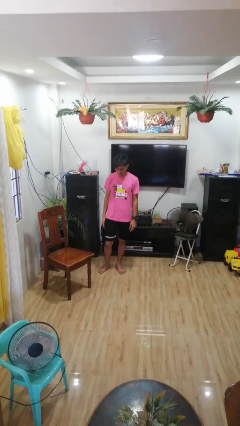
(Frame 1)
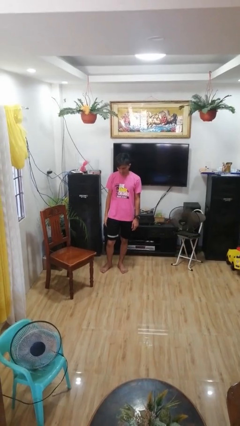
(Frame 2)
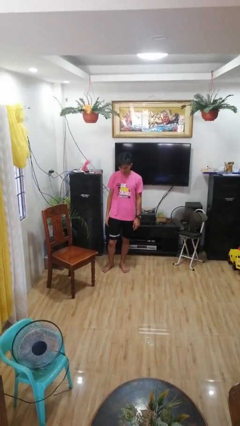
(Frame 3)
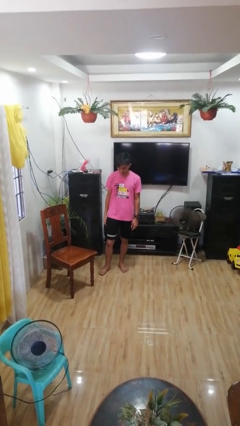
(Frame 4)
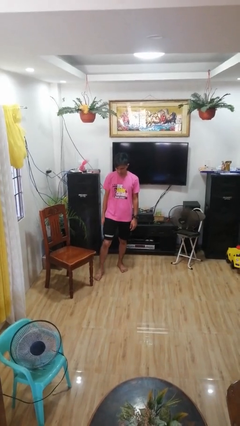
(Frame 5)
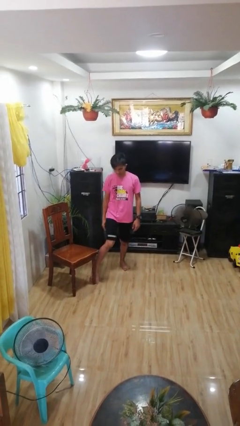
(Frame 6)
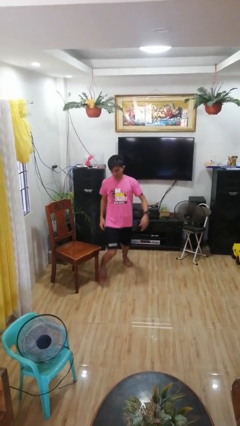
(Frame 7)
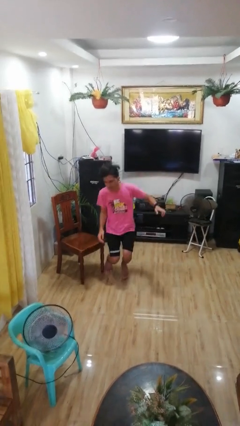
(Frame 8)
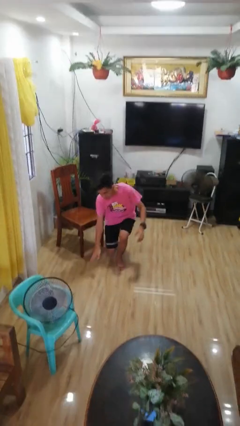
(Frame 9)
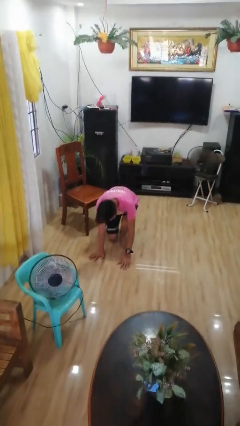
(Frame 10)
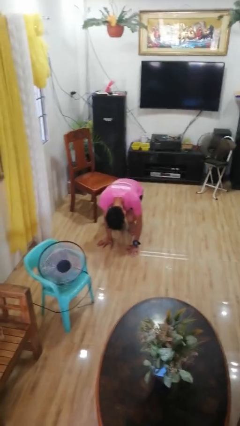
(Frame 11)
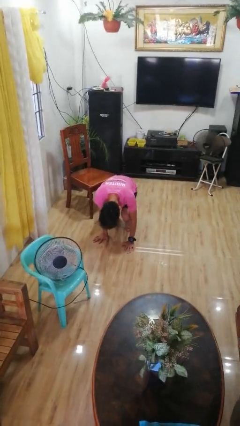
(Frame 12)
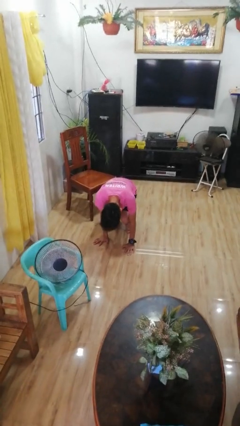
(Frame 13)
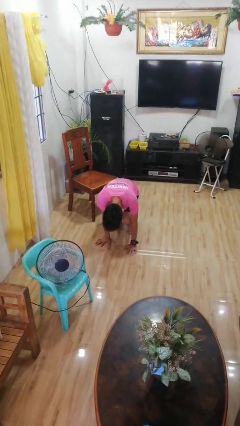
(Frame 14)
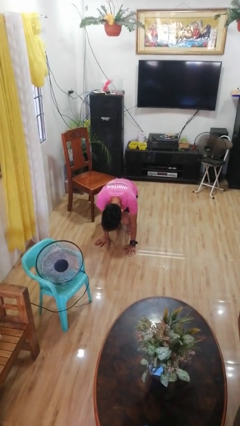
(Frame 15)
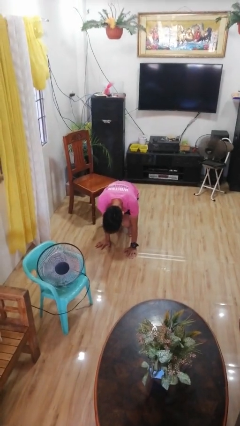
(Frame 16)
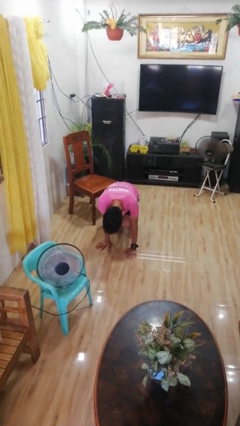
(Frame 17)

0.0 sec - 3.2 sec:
person trips on object on floor

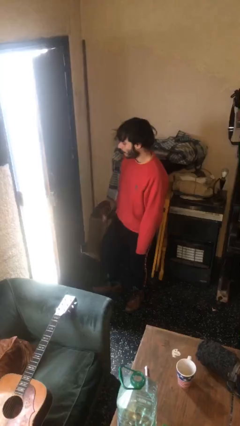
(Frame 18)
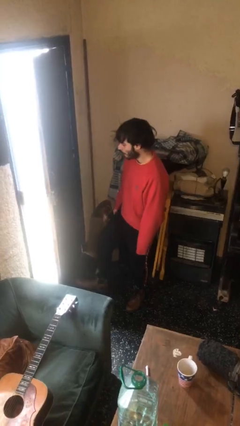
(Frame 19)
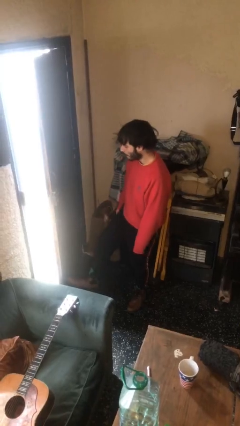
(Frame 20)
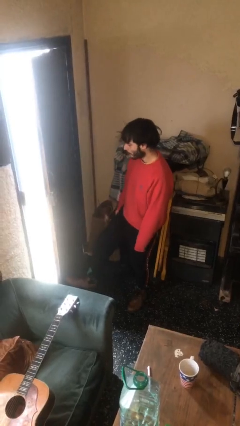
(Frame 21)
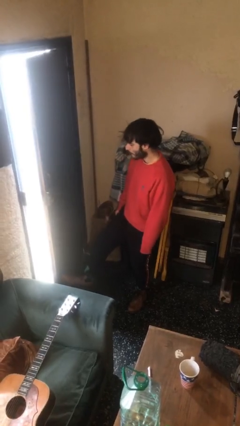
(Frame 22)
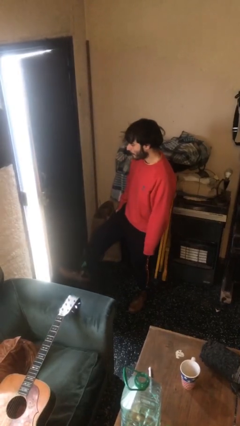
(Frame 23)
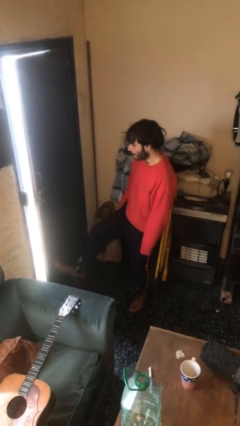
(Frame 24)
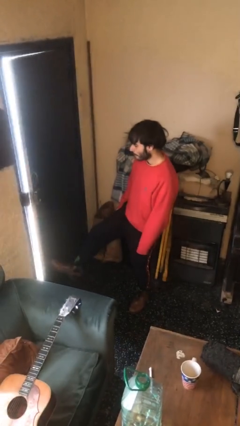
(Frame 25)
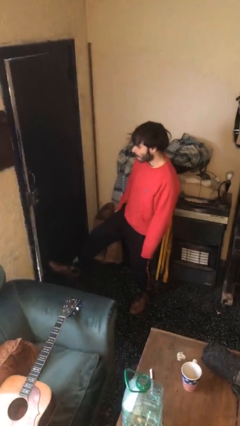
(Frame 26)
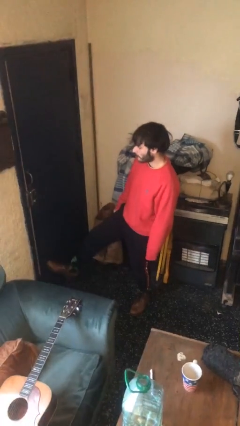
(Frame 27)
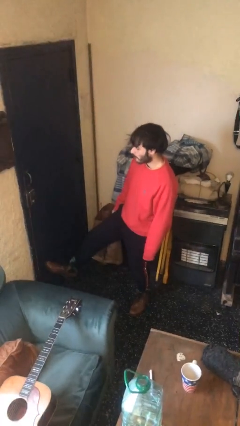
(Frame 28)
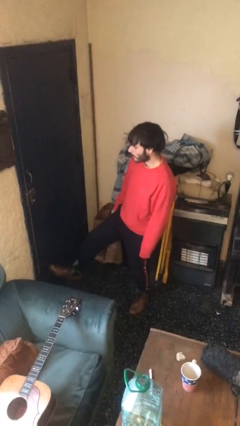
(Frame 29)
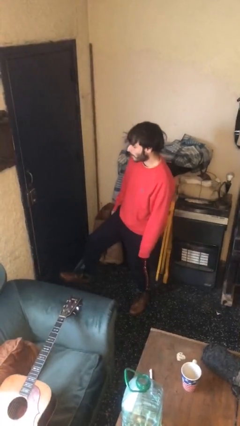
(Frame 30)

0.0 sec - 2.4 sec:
person closes door with foot

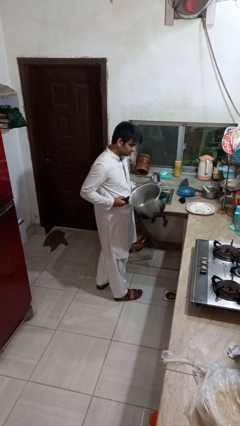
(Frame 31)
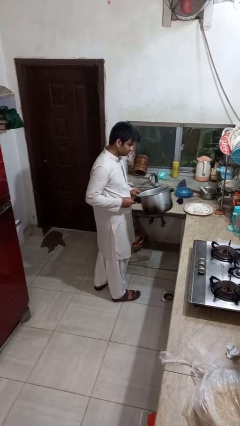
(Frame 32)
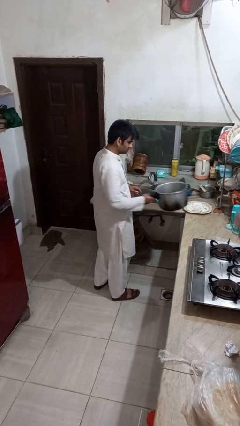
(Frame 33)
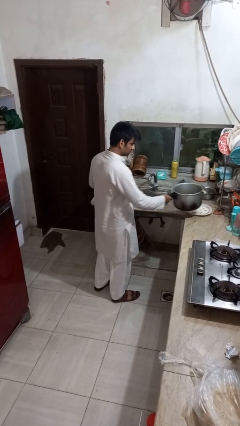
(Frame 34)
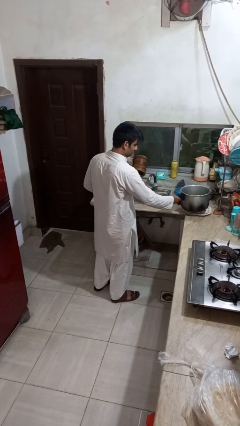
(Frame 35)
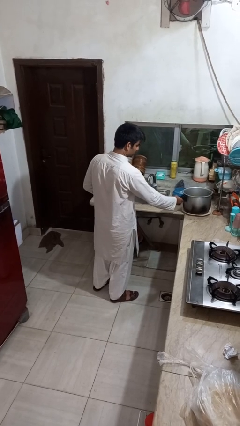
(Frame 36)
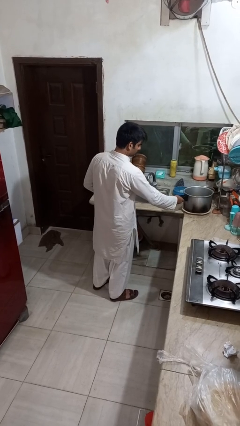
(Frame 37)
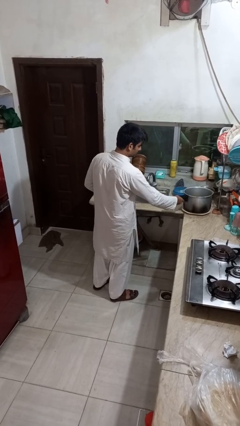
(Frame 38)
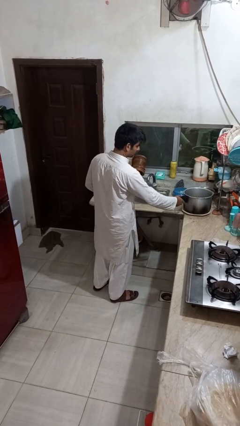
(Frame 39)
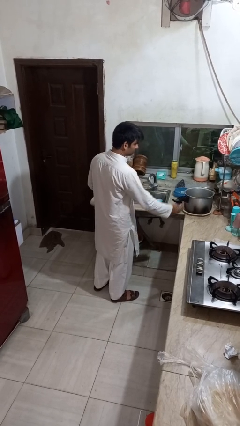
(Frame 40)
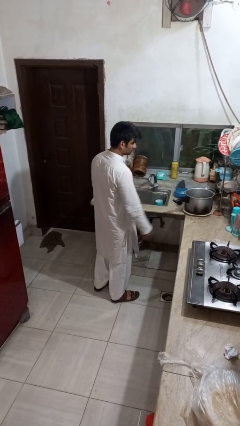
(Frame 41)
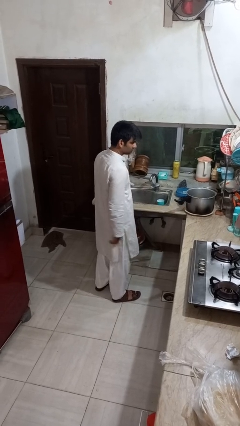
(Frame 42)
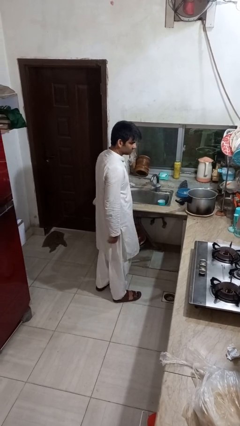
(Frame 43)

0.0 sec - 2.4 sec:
person puts down object on countertop

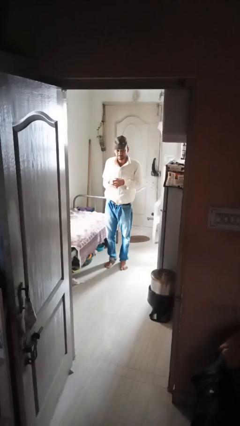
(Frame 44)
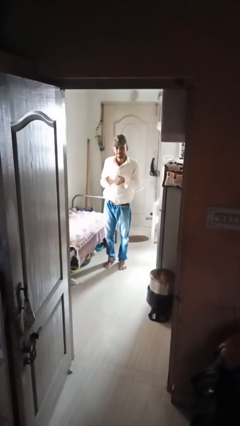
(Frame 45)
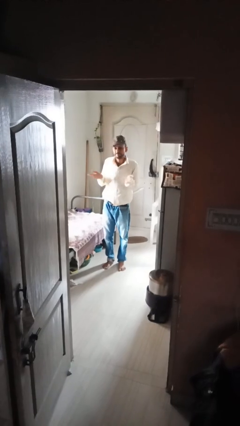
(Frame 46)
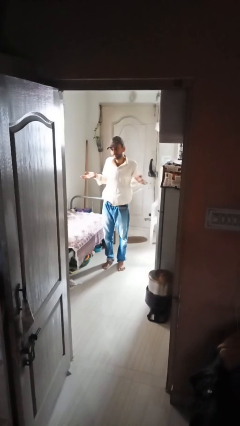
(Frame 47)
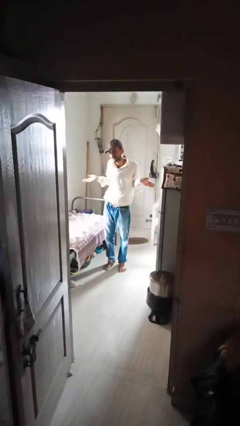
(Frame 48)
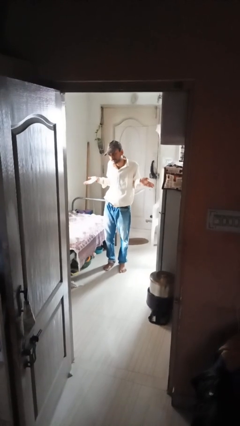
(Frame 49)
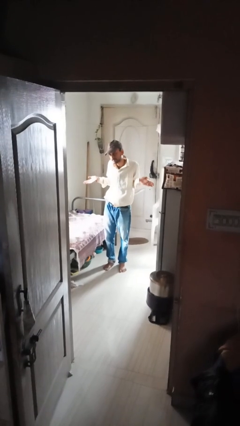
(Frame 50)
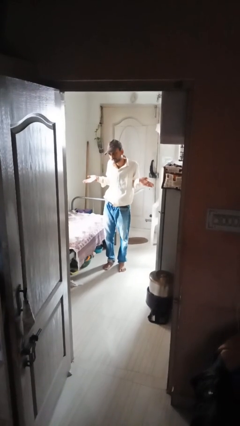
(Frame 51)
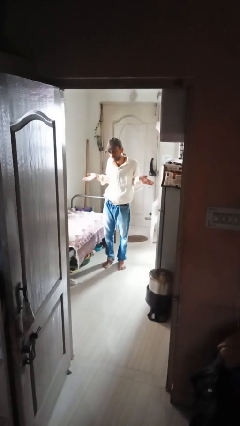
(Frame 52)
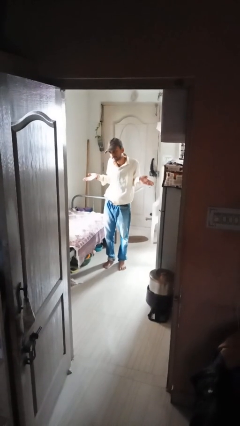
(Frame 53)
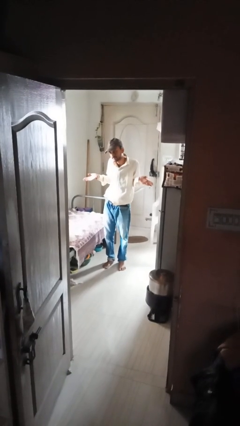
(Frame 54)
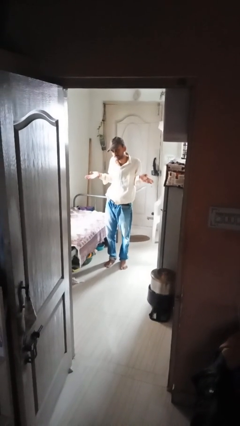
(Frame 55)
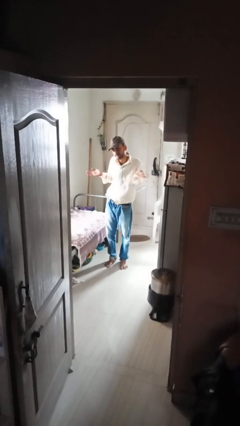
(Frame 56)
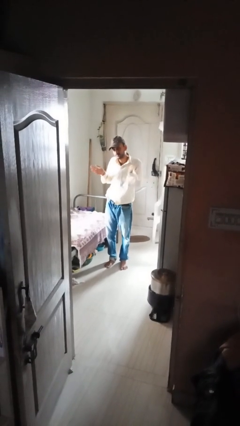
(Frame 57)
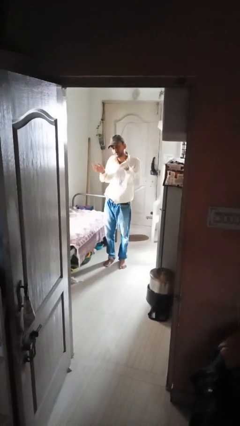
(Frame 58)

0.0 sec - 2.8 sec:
person shrugs

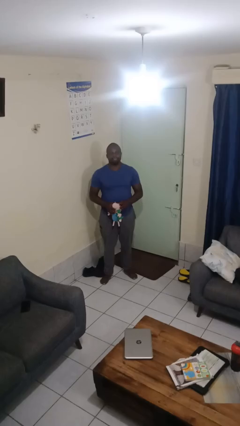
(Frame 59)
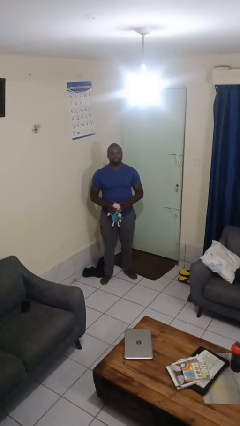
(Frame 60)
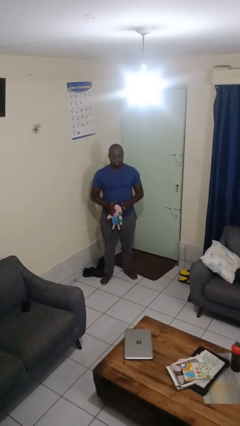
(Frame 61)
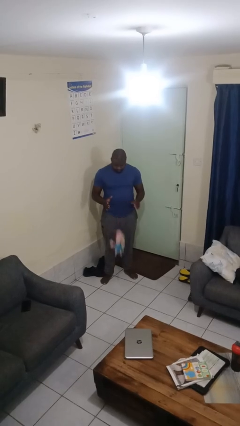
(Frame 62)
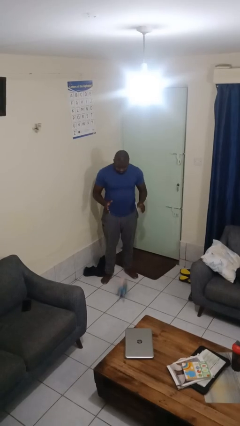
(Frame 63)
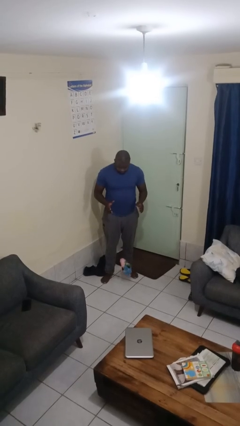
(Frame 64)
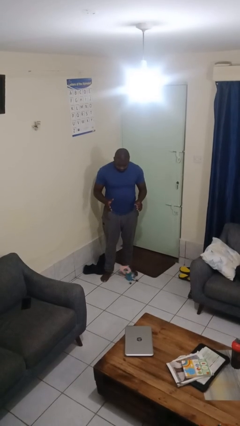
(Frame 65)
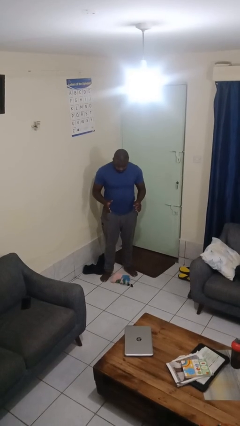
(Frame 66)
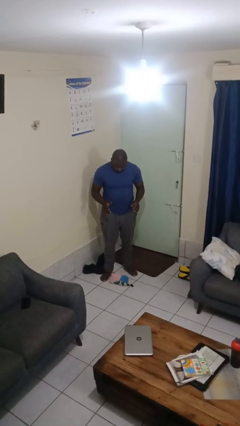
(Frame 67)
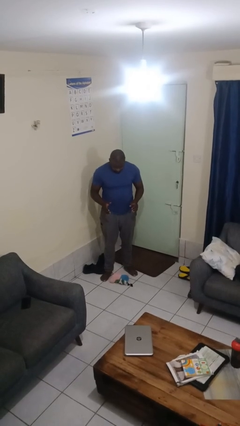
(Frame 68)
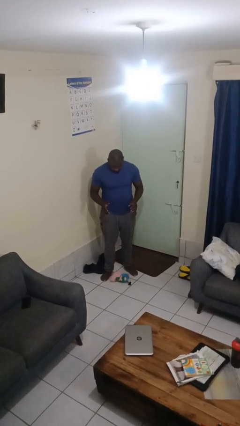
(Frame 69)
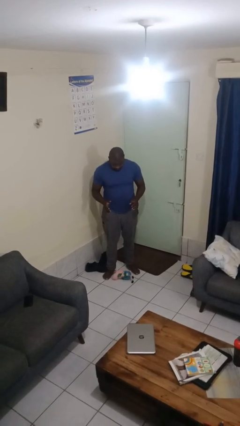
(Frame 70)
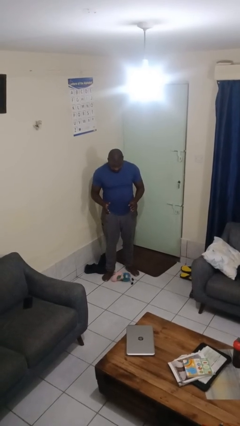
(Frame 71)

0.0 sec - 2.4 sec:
person drops object

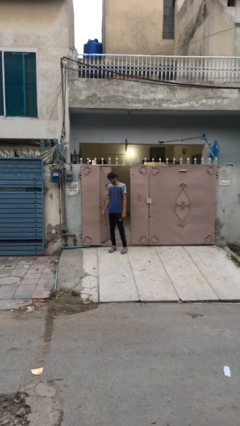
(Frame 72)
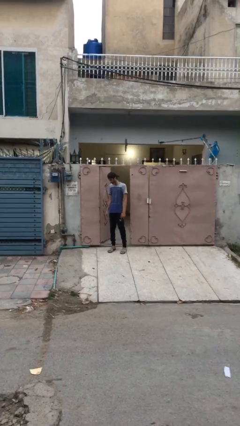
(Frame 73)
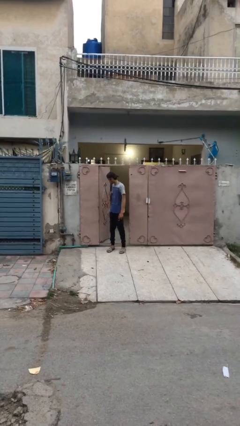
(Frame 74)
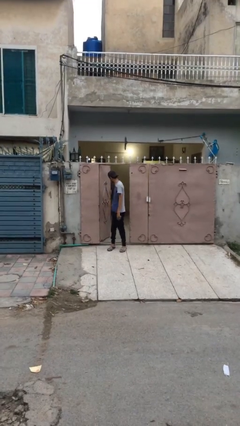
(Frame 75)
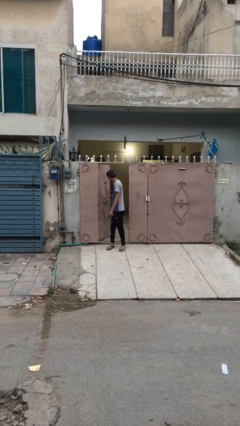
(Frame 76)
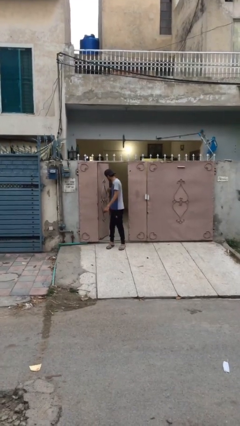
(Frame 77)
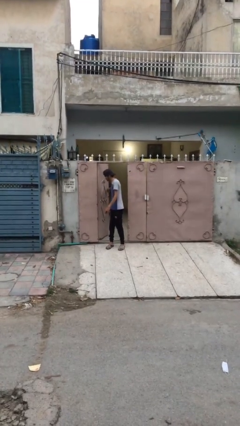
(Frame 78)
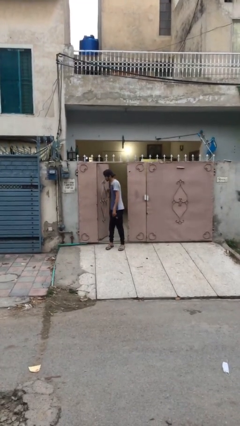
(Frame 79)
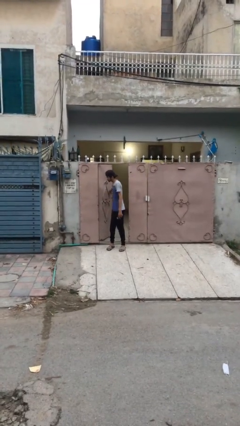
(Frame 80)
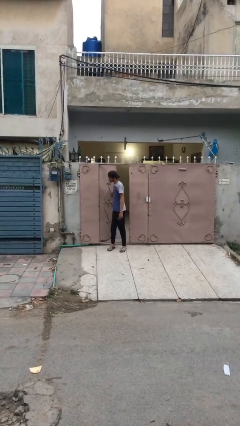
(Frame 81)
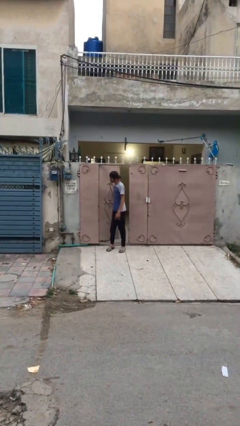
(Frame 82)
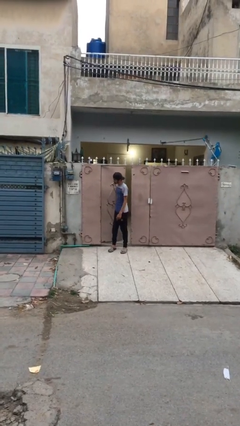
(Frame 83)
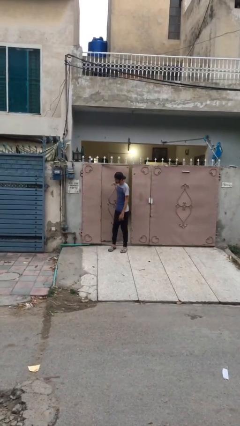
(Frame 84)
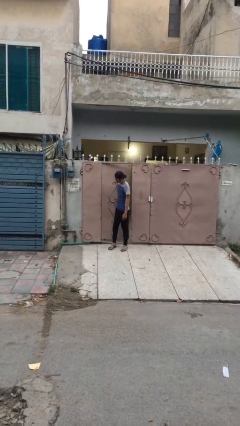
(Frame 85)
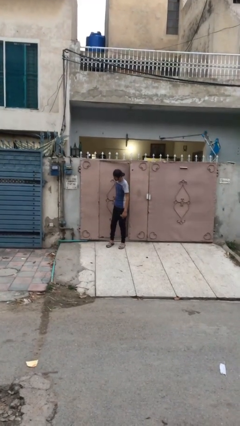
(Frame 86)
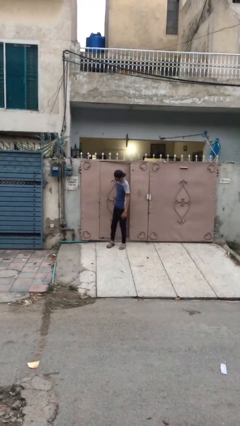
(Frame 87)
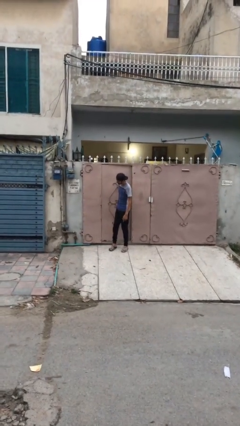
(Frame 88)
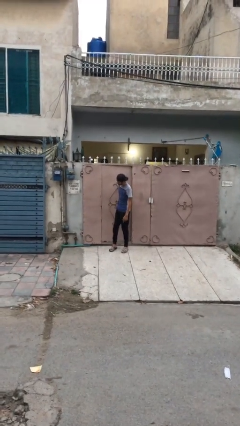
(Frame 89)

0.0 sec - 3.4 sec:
person closes facility door

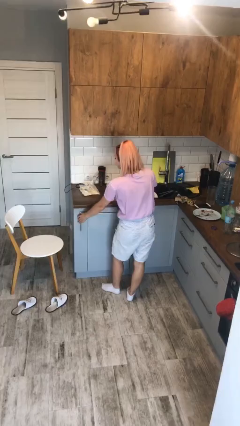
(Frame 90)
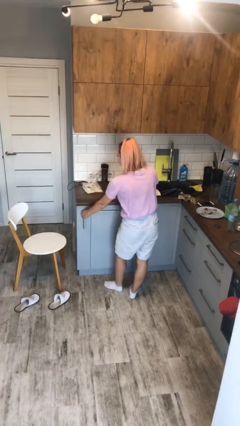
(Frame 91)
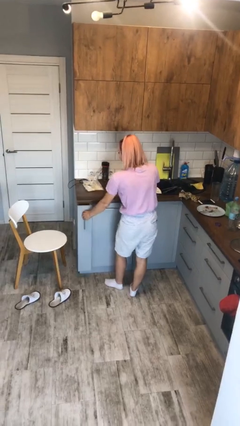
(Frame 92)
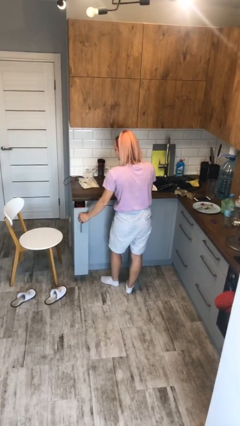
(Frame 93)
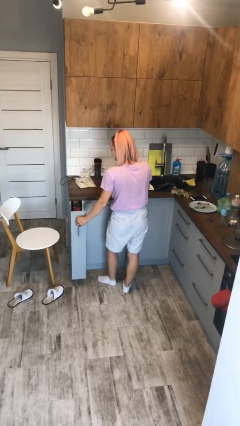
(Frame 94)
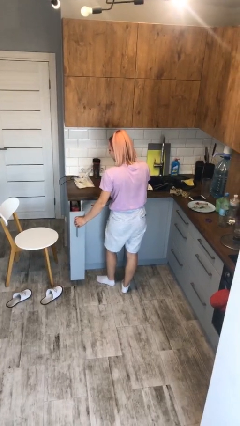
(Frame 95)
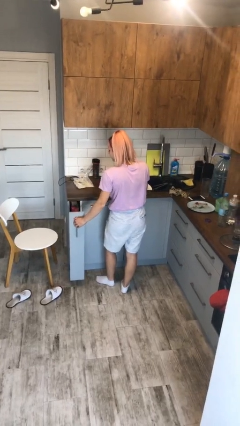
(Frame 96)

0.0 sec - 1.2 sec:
person closes cabinet
